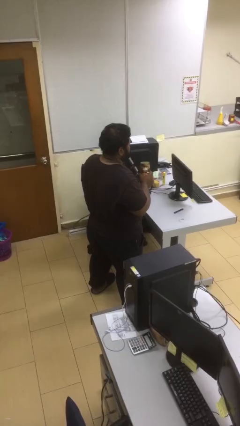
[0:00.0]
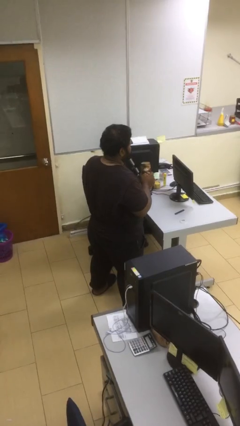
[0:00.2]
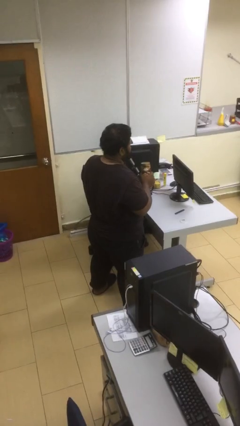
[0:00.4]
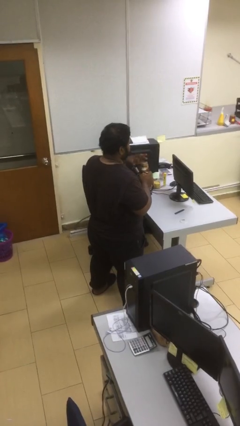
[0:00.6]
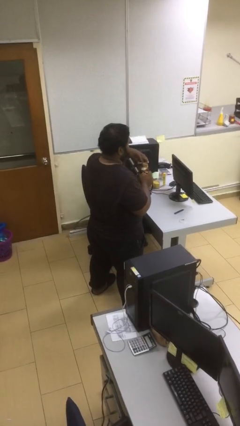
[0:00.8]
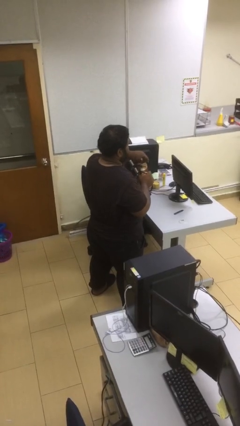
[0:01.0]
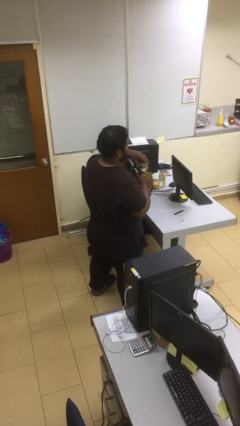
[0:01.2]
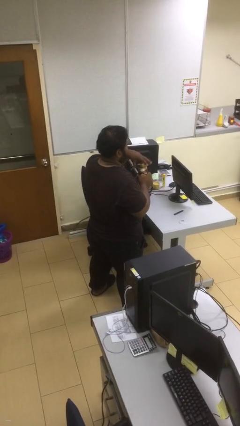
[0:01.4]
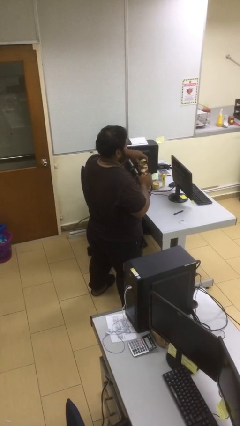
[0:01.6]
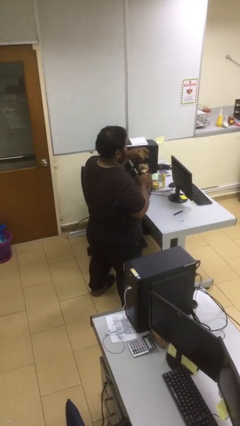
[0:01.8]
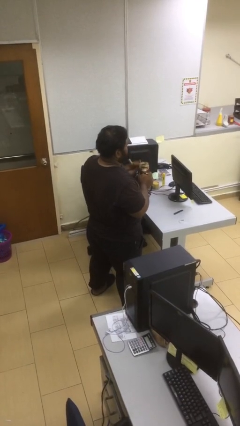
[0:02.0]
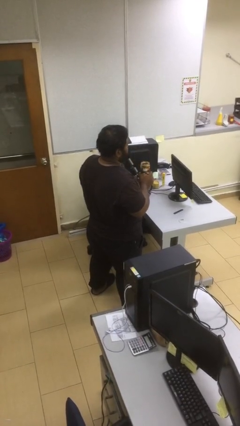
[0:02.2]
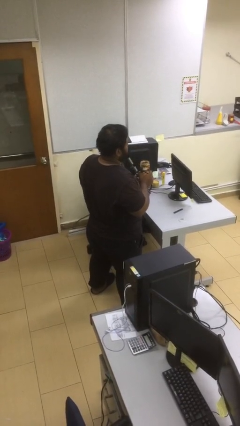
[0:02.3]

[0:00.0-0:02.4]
person opens jar

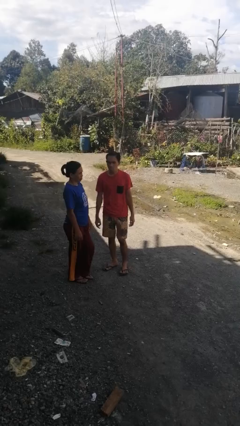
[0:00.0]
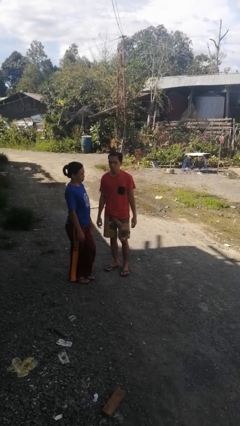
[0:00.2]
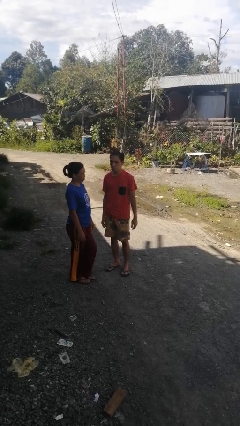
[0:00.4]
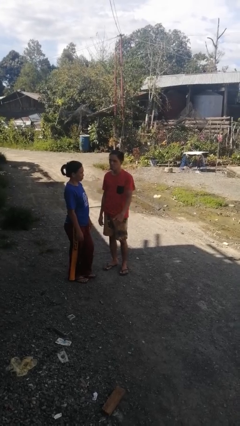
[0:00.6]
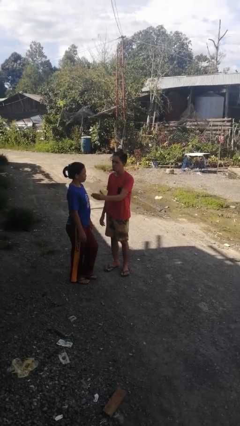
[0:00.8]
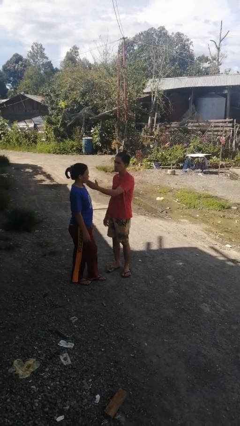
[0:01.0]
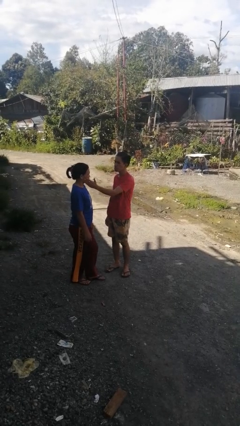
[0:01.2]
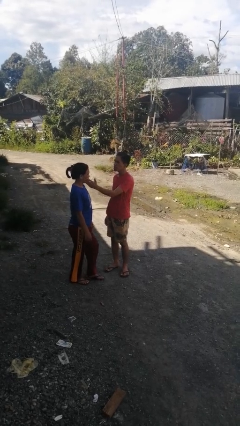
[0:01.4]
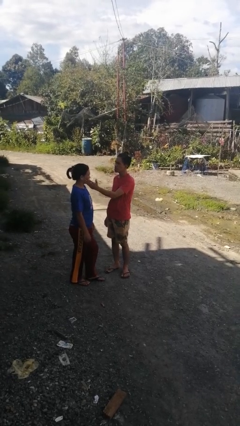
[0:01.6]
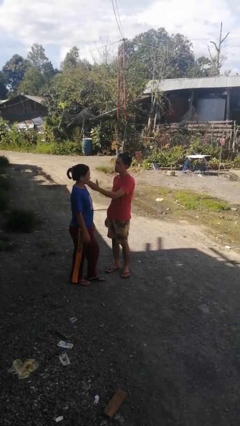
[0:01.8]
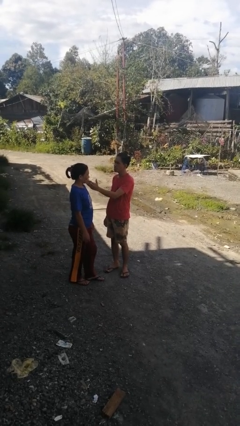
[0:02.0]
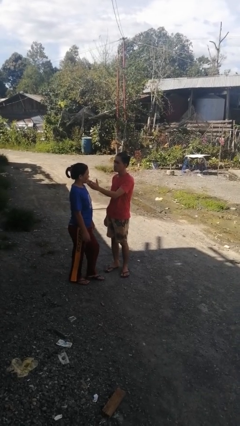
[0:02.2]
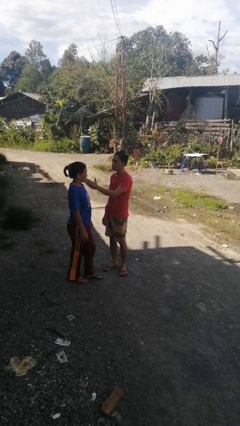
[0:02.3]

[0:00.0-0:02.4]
person touches face of person

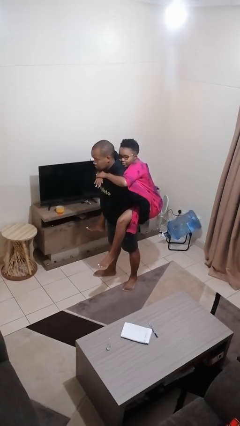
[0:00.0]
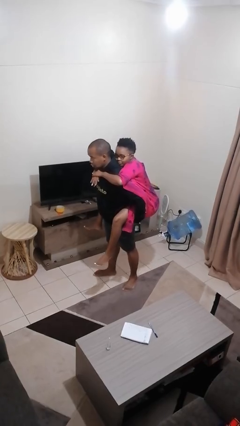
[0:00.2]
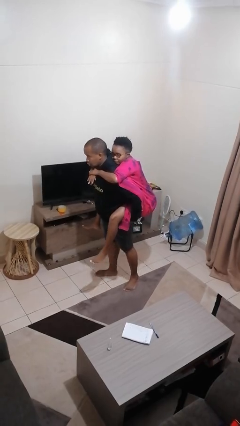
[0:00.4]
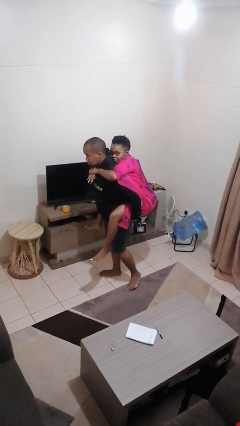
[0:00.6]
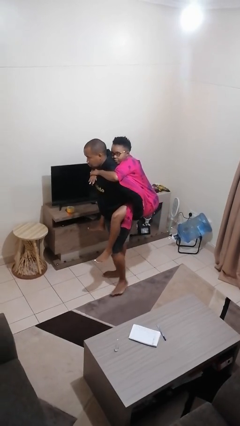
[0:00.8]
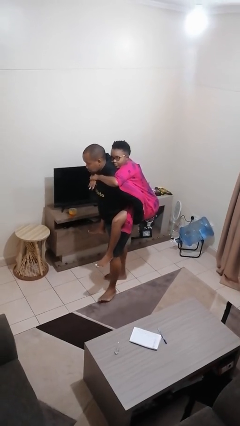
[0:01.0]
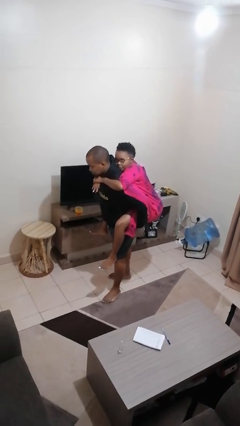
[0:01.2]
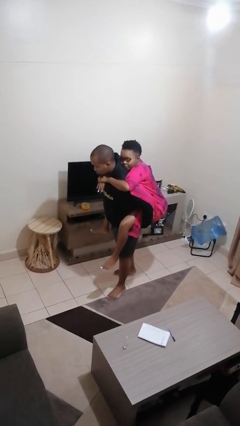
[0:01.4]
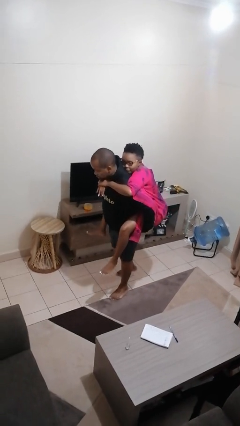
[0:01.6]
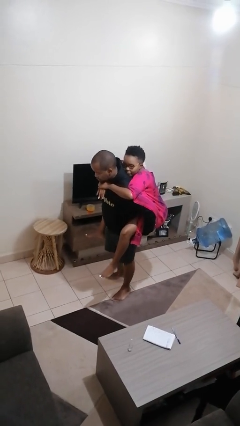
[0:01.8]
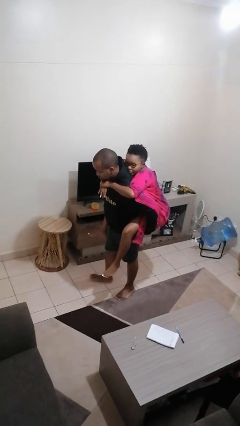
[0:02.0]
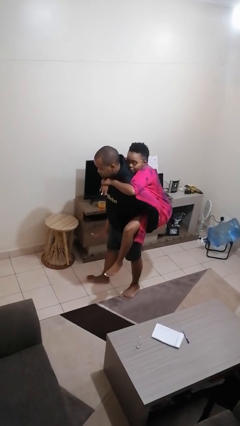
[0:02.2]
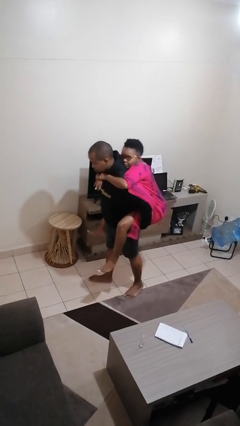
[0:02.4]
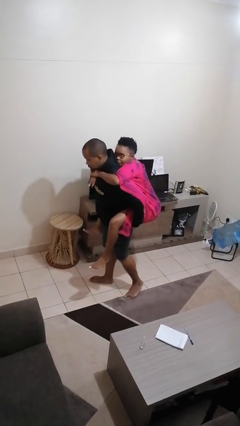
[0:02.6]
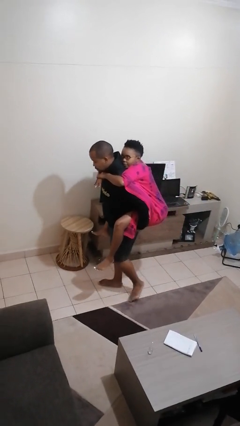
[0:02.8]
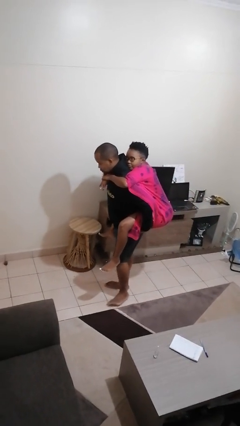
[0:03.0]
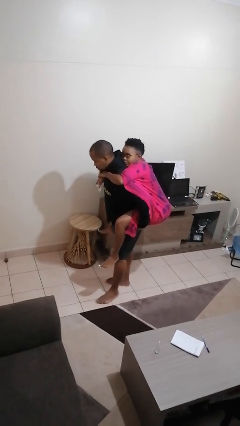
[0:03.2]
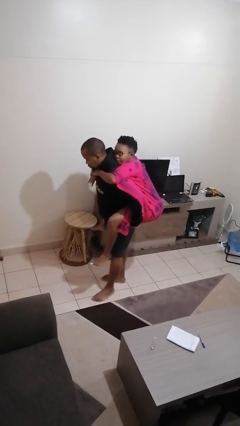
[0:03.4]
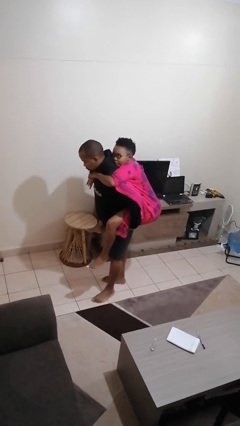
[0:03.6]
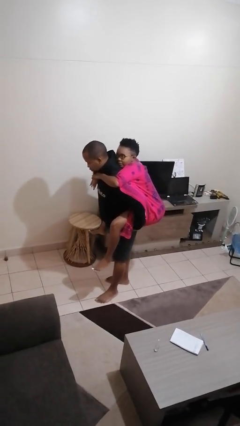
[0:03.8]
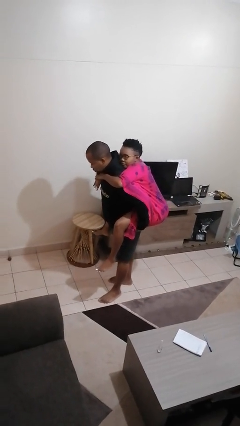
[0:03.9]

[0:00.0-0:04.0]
person carries person on back

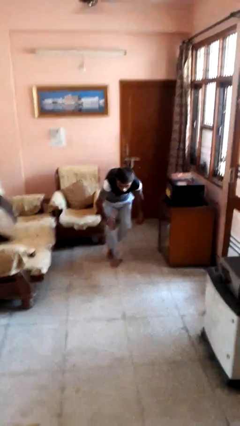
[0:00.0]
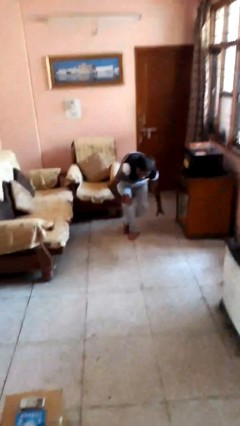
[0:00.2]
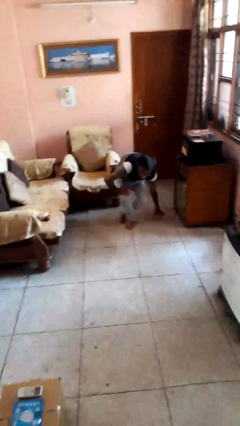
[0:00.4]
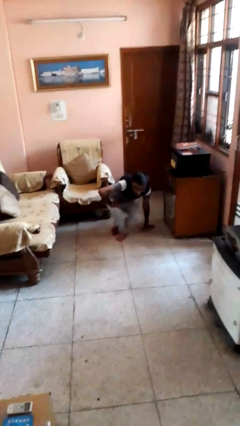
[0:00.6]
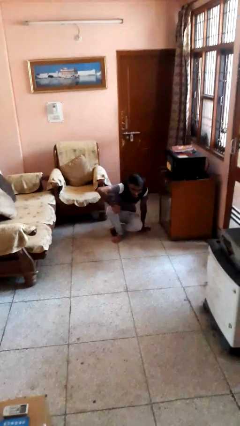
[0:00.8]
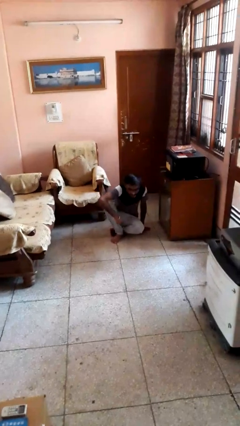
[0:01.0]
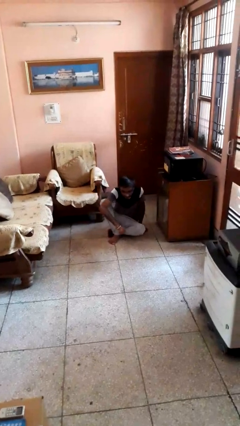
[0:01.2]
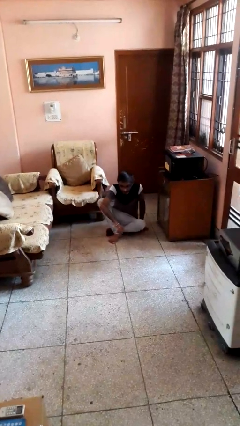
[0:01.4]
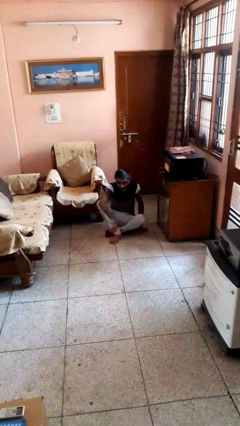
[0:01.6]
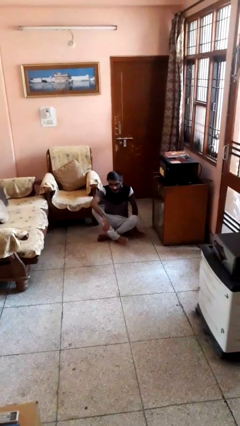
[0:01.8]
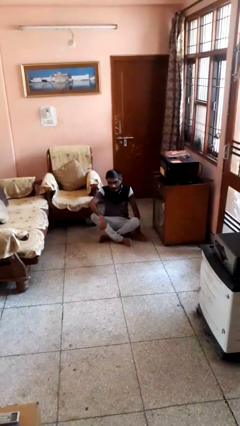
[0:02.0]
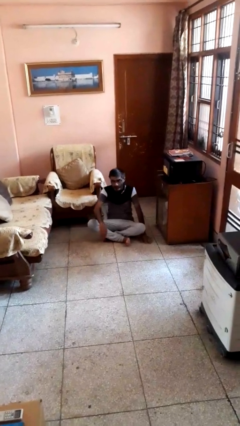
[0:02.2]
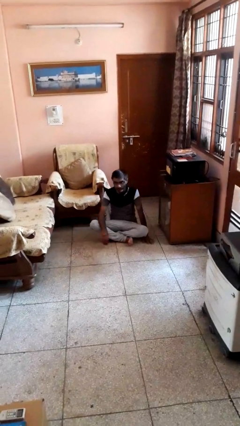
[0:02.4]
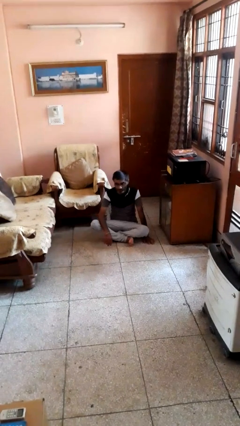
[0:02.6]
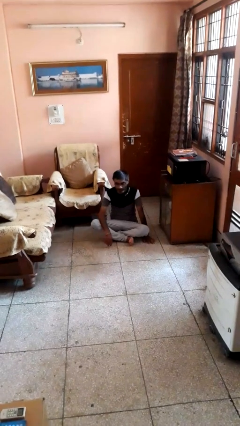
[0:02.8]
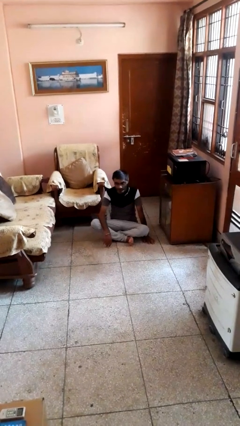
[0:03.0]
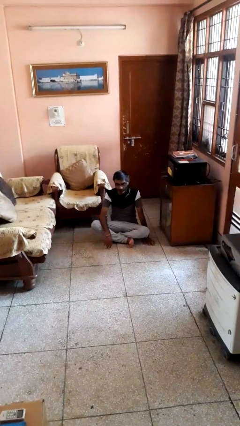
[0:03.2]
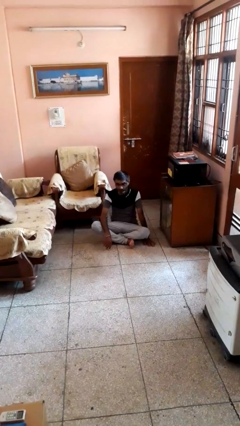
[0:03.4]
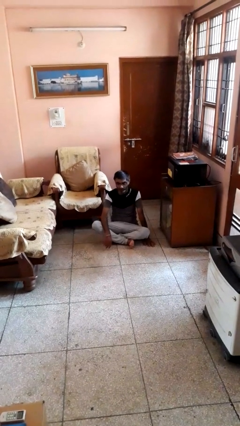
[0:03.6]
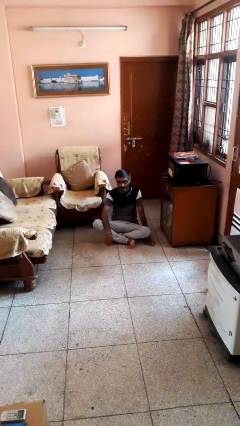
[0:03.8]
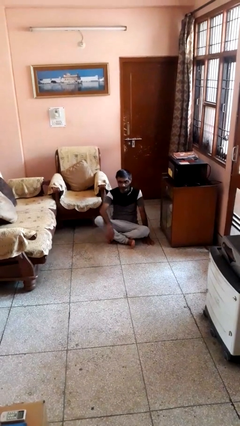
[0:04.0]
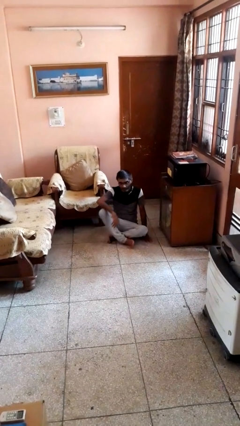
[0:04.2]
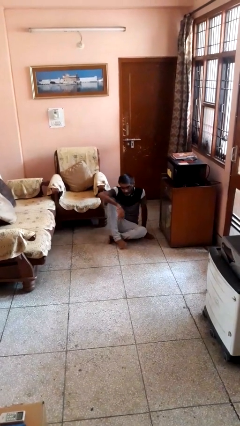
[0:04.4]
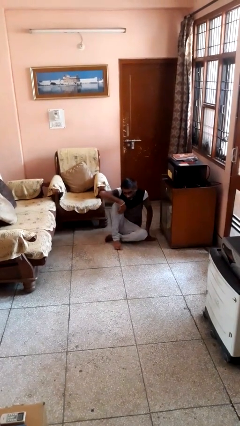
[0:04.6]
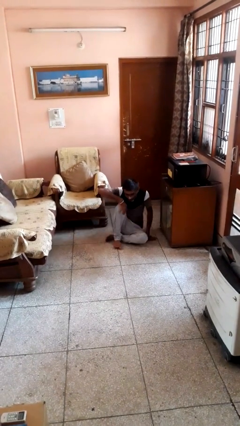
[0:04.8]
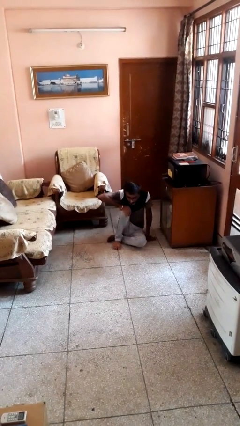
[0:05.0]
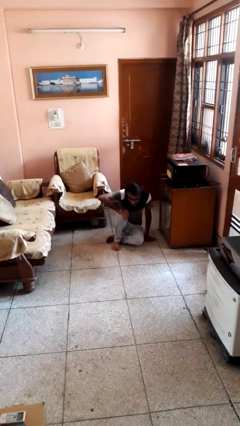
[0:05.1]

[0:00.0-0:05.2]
person sits crisscross

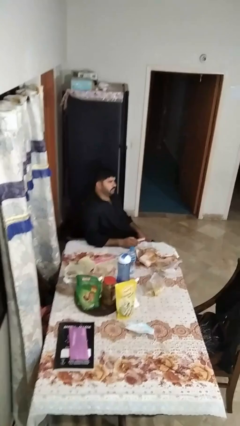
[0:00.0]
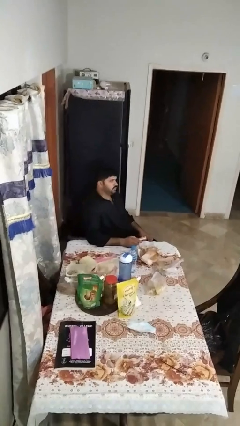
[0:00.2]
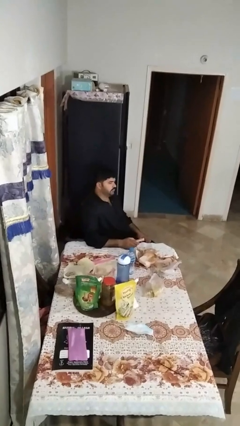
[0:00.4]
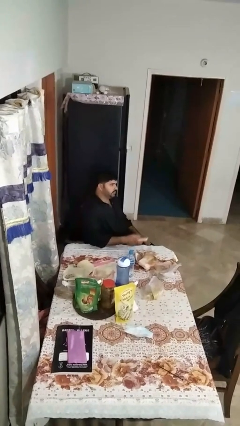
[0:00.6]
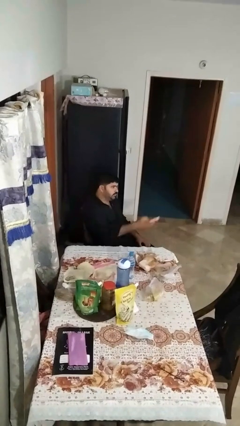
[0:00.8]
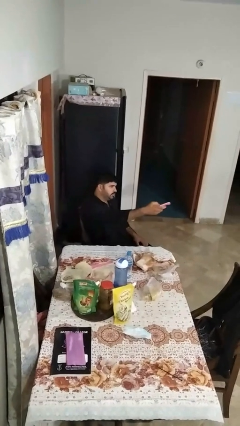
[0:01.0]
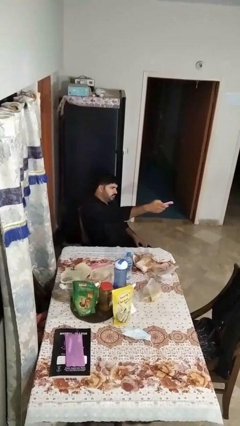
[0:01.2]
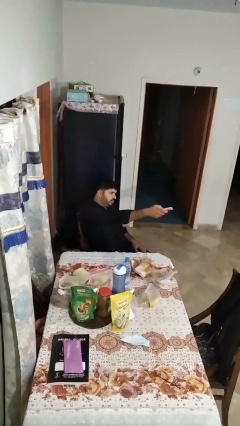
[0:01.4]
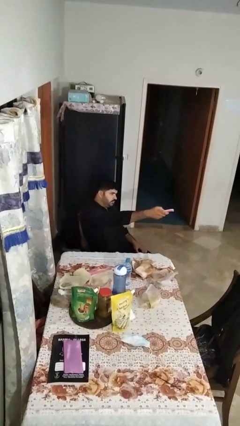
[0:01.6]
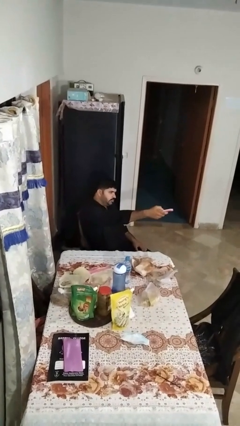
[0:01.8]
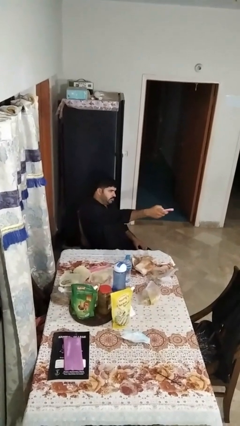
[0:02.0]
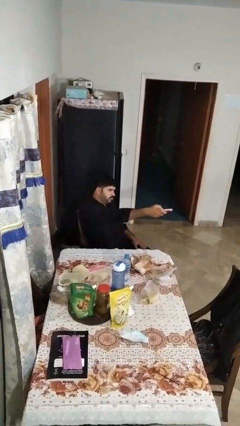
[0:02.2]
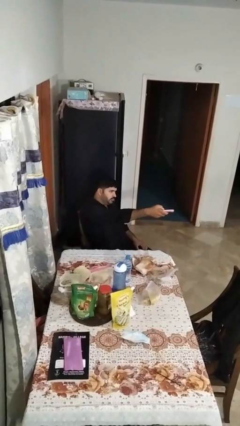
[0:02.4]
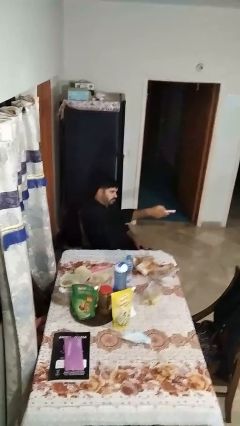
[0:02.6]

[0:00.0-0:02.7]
person uses television remote

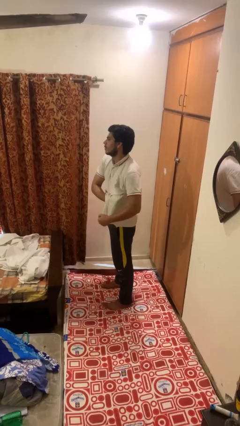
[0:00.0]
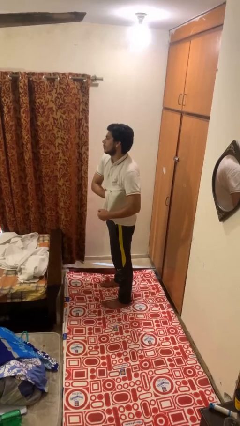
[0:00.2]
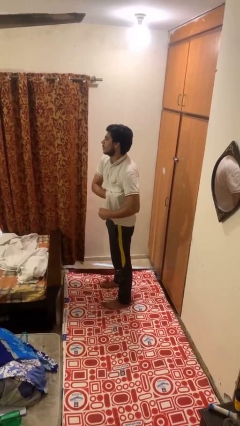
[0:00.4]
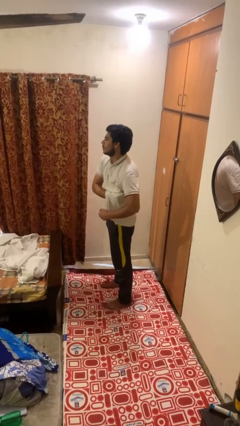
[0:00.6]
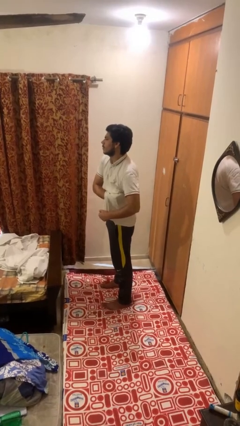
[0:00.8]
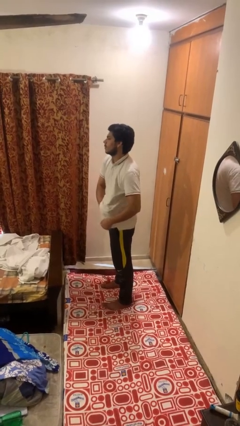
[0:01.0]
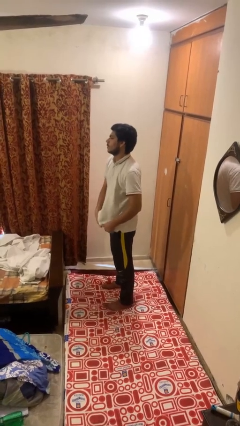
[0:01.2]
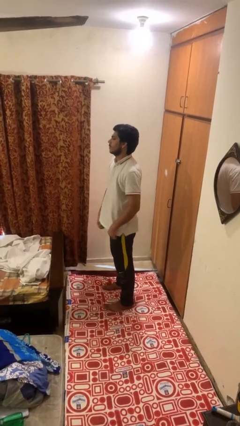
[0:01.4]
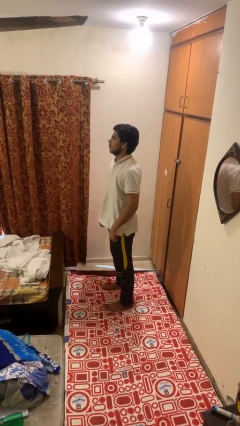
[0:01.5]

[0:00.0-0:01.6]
person applies deodorant
